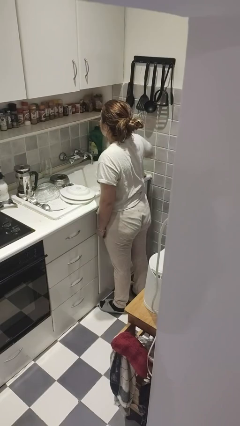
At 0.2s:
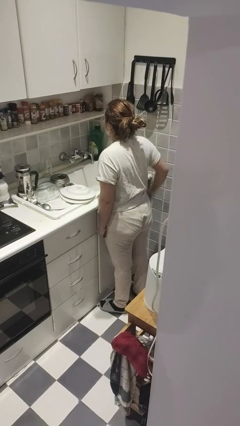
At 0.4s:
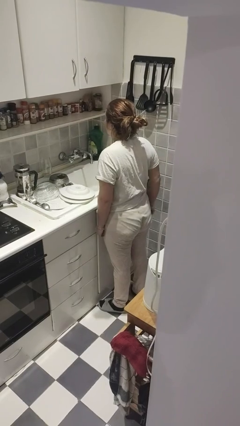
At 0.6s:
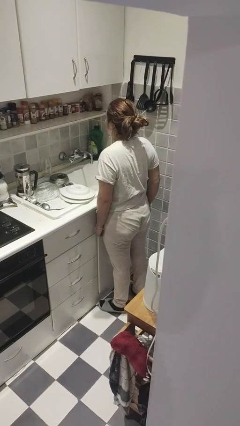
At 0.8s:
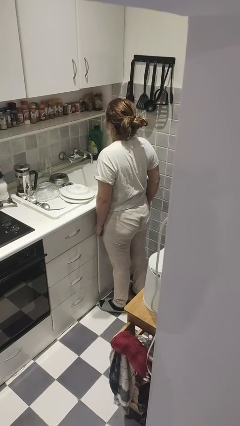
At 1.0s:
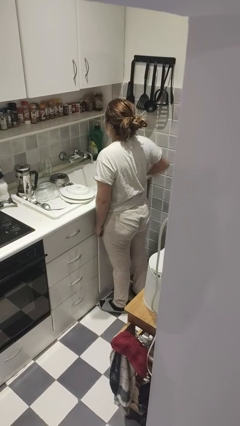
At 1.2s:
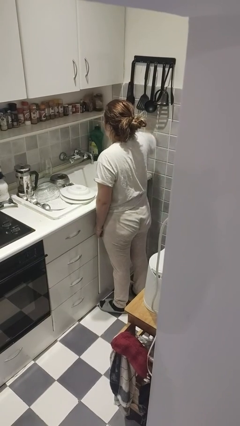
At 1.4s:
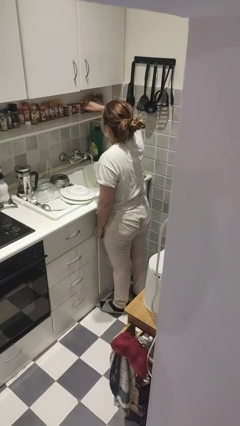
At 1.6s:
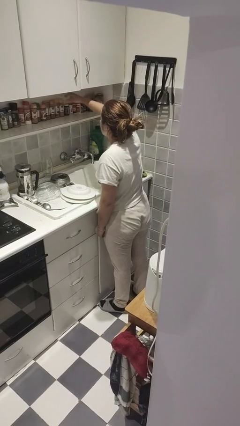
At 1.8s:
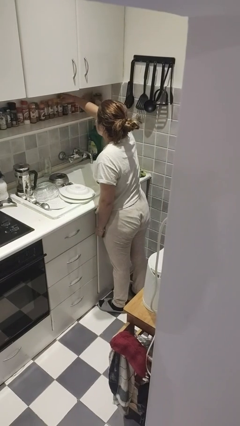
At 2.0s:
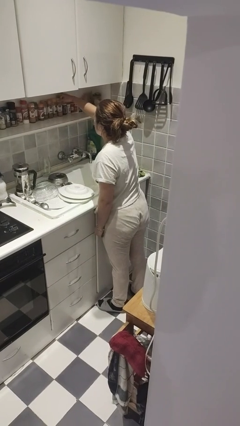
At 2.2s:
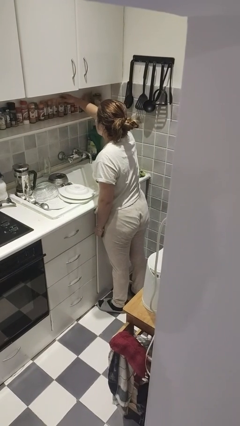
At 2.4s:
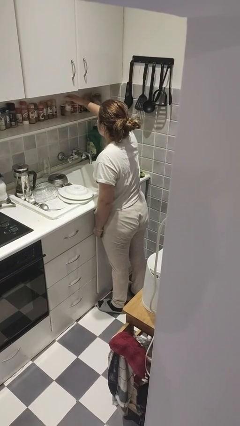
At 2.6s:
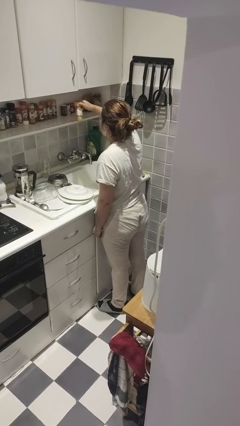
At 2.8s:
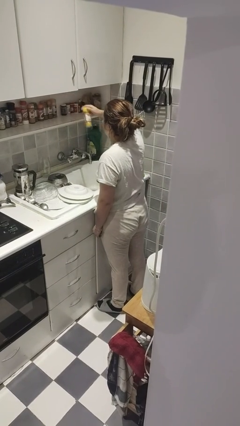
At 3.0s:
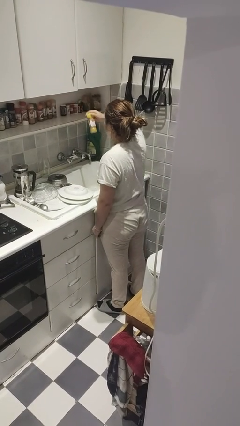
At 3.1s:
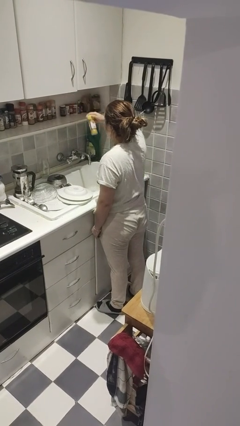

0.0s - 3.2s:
person picks up object from countertop

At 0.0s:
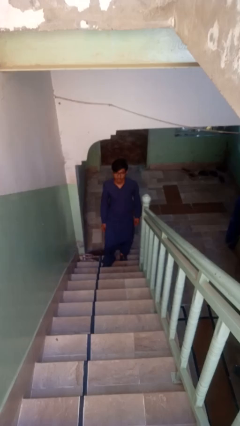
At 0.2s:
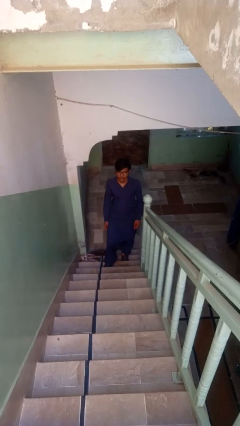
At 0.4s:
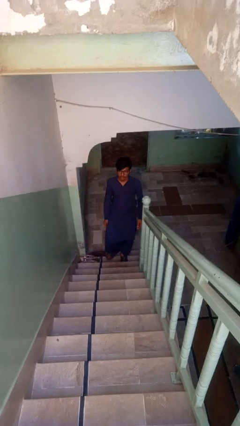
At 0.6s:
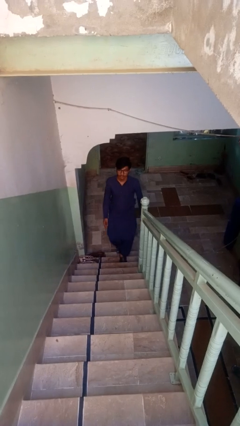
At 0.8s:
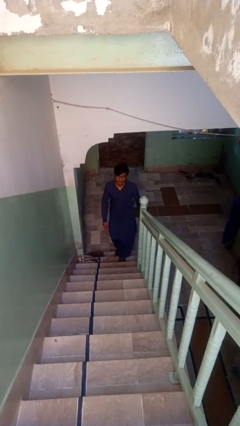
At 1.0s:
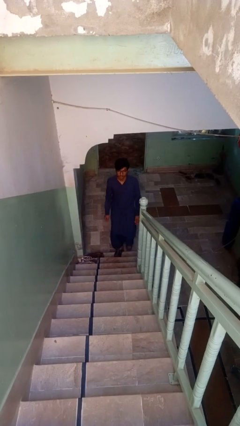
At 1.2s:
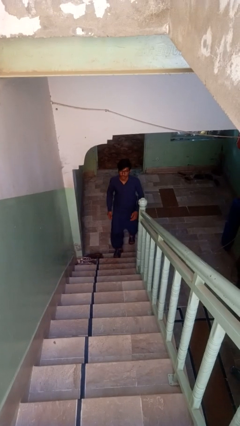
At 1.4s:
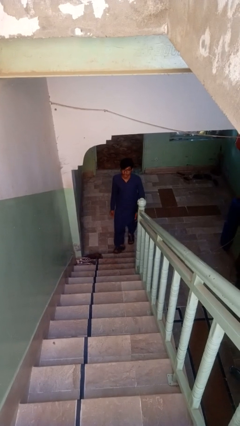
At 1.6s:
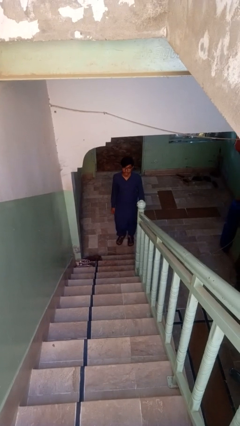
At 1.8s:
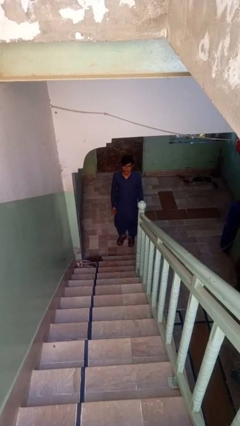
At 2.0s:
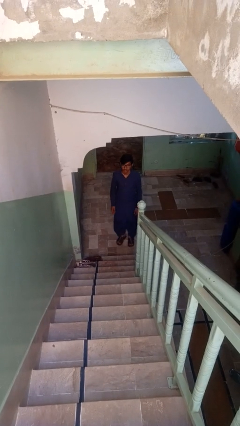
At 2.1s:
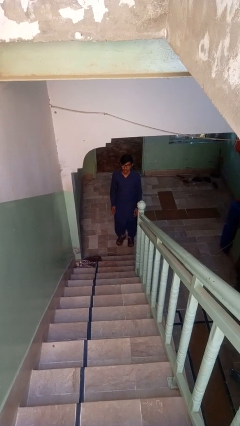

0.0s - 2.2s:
person climbs down stairs

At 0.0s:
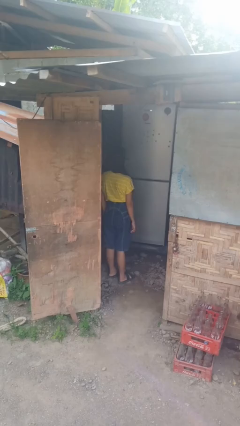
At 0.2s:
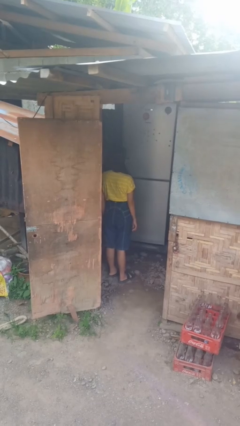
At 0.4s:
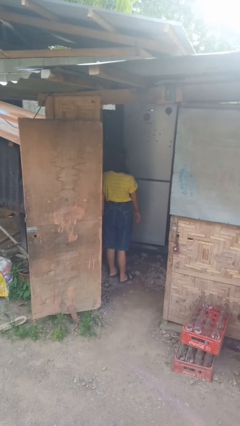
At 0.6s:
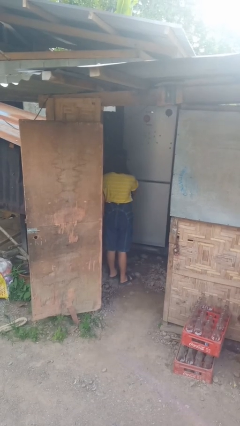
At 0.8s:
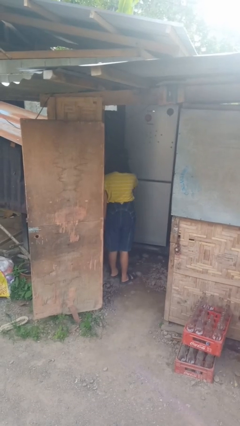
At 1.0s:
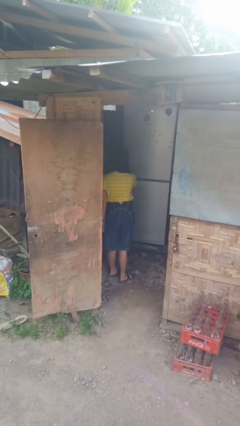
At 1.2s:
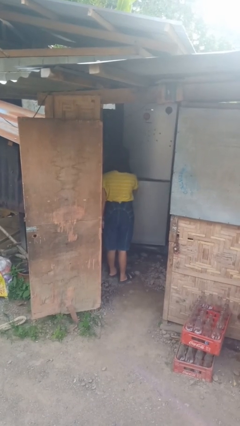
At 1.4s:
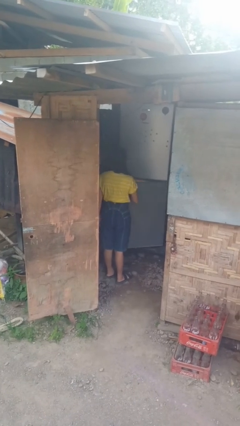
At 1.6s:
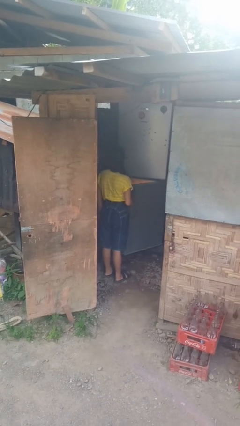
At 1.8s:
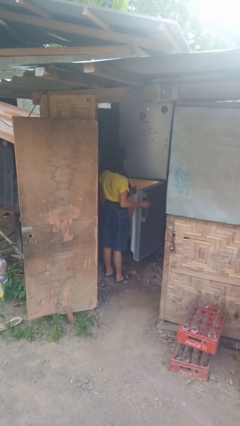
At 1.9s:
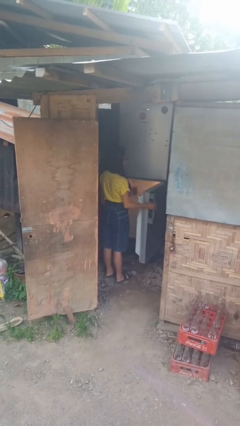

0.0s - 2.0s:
person opens refrigerator

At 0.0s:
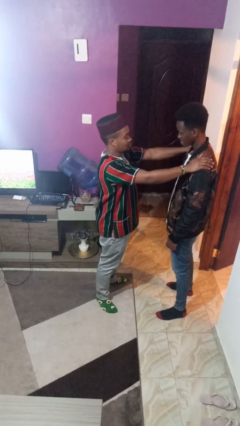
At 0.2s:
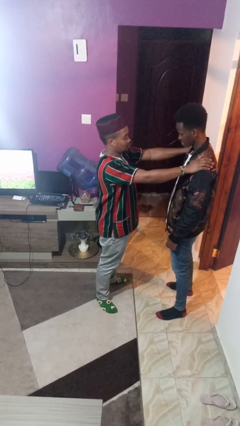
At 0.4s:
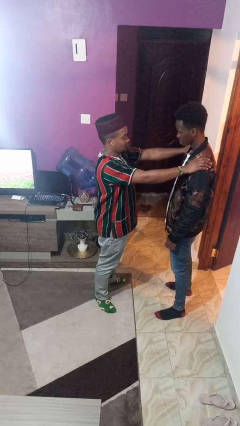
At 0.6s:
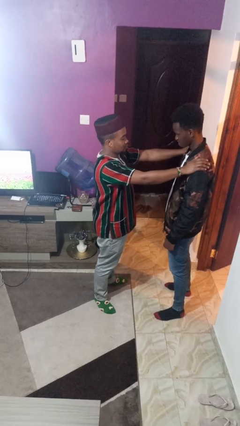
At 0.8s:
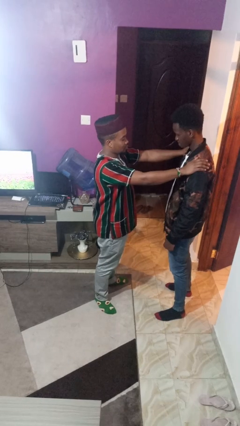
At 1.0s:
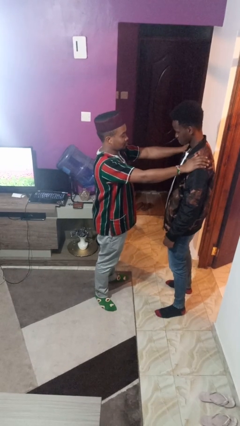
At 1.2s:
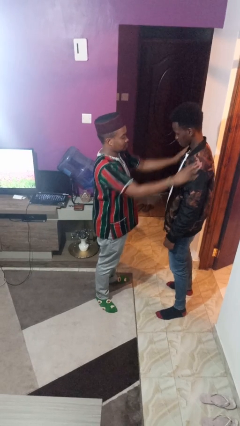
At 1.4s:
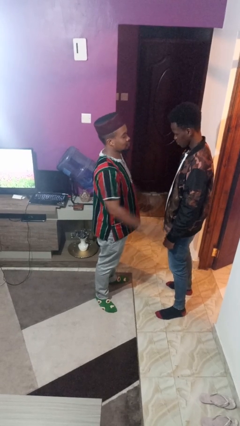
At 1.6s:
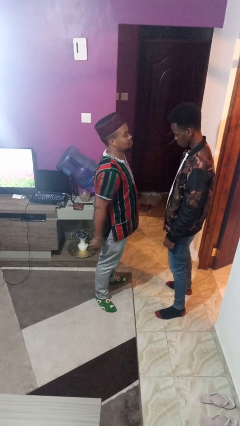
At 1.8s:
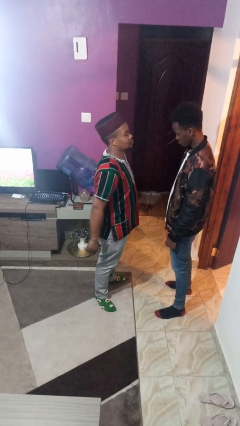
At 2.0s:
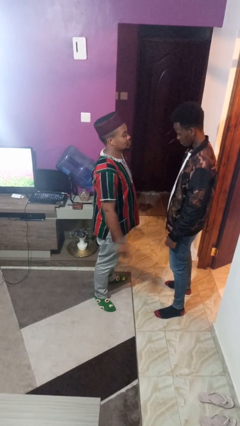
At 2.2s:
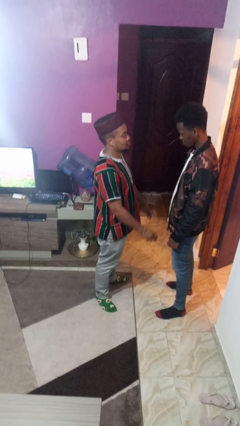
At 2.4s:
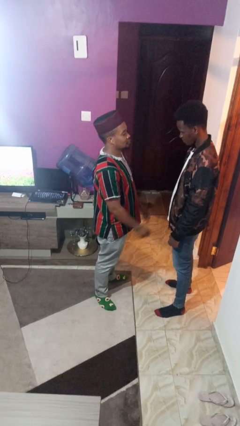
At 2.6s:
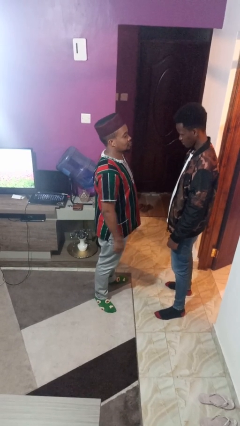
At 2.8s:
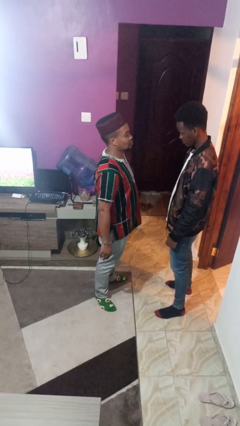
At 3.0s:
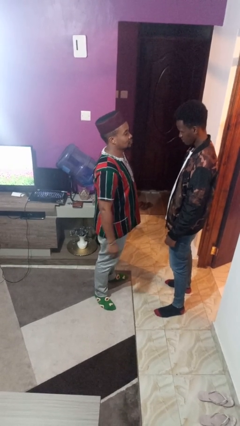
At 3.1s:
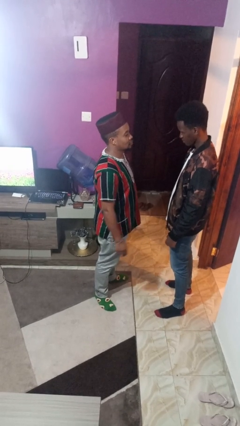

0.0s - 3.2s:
person closes door with foot

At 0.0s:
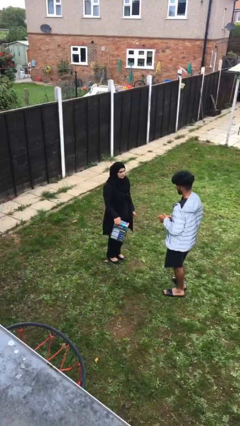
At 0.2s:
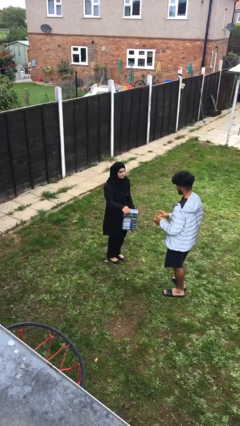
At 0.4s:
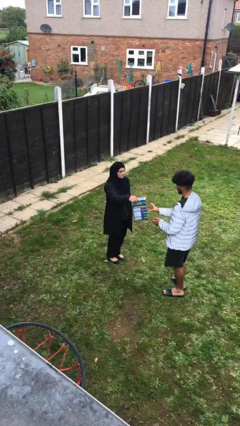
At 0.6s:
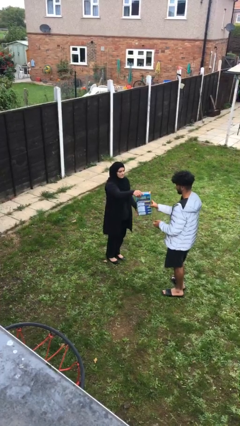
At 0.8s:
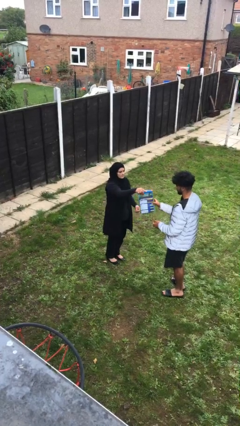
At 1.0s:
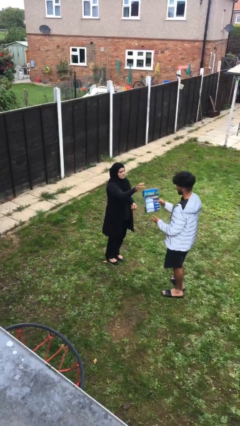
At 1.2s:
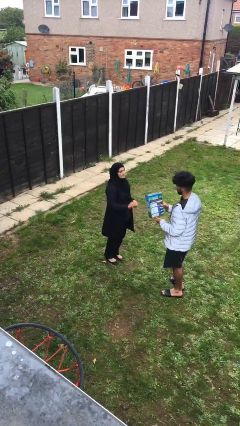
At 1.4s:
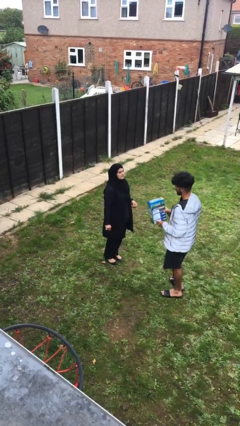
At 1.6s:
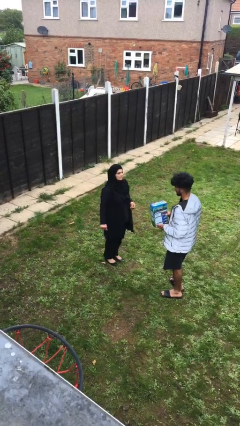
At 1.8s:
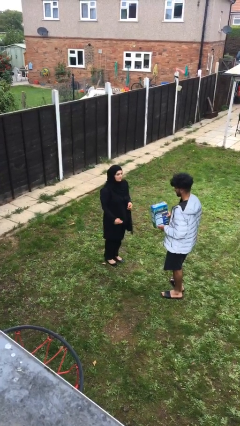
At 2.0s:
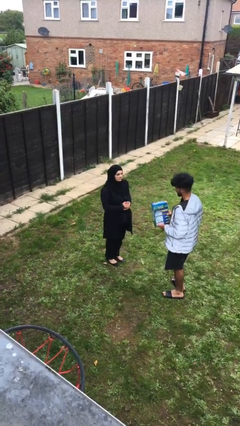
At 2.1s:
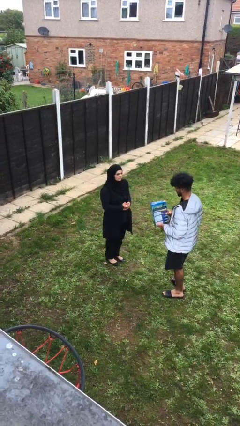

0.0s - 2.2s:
person transfers object to person

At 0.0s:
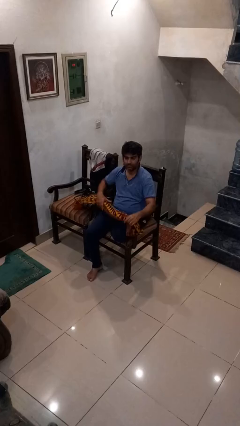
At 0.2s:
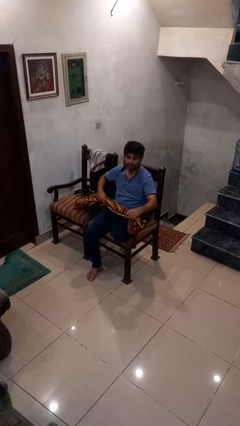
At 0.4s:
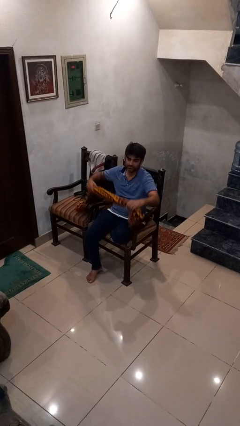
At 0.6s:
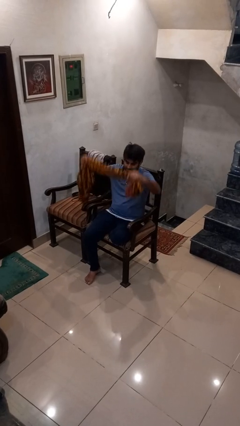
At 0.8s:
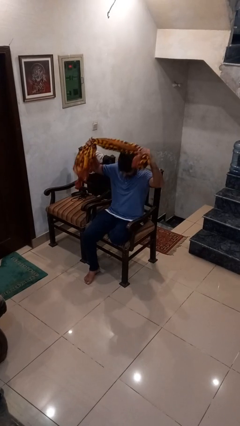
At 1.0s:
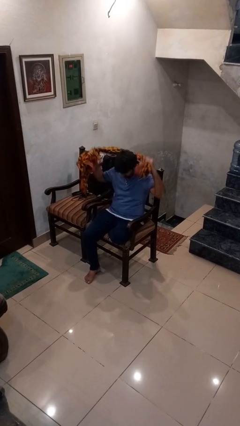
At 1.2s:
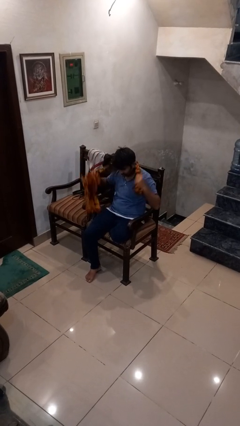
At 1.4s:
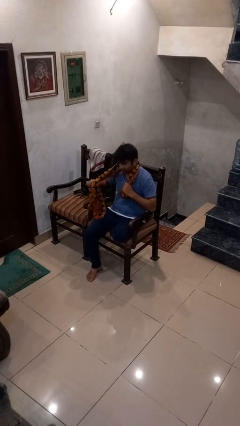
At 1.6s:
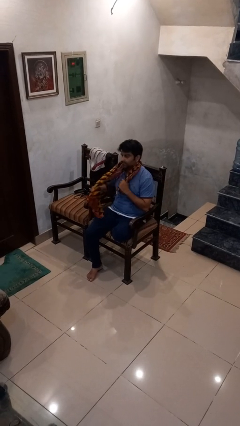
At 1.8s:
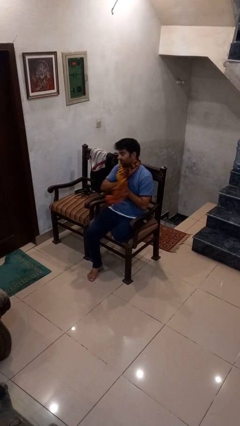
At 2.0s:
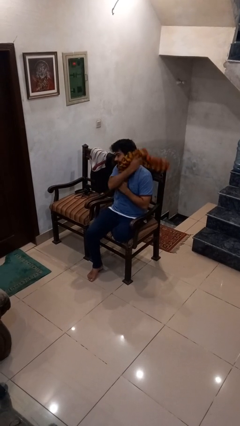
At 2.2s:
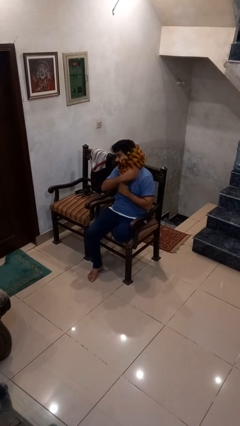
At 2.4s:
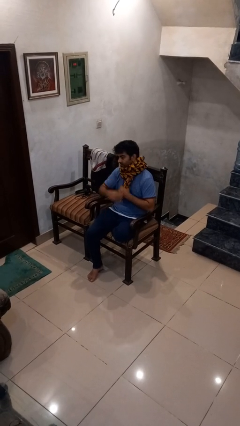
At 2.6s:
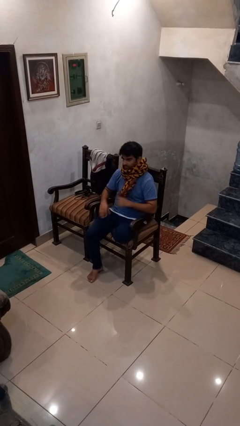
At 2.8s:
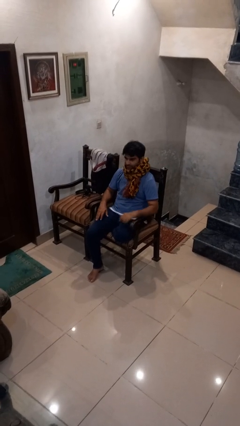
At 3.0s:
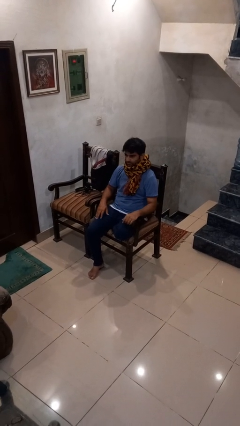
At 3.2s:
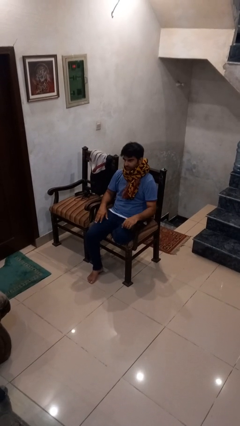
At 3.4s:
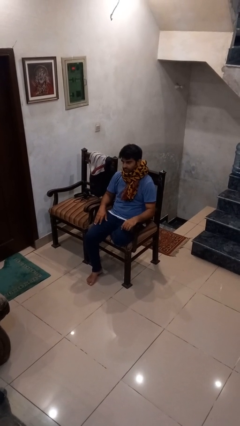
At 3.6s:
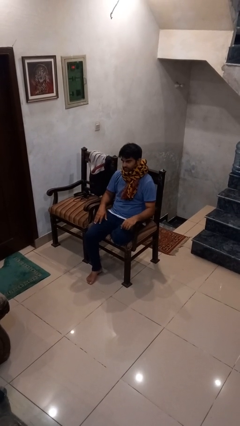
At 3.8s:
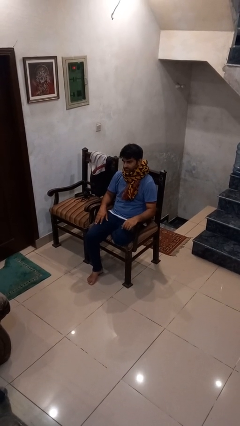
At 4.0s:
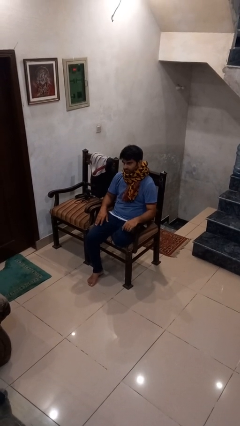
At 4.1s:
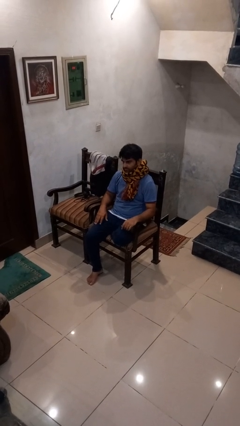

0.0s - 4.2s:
person puts on scarf

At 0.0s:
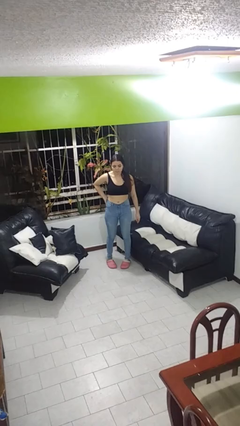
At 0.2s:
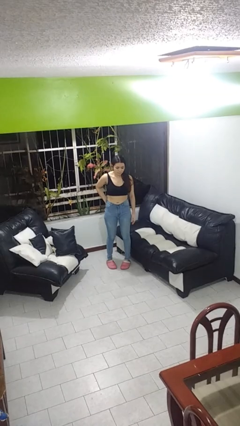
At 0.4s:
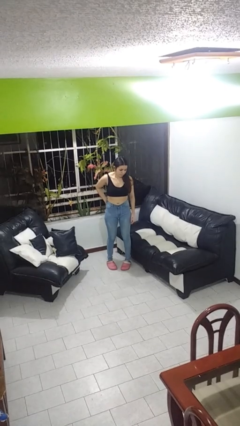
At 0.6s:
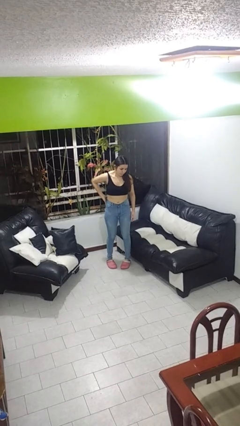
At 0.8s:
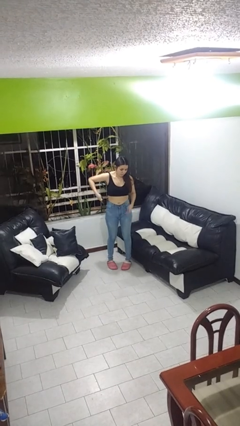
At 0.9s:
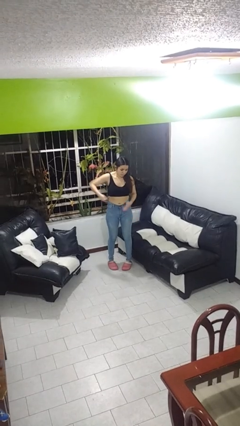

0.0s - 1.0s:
person takes phone from pocket
